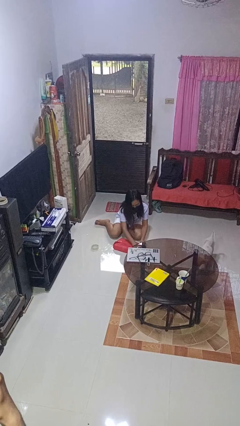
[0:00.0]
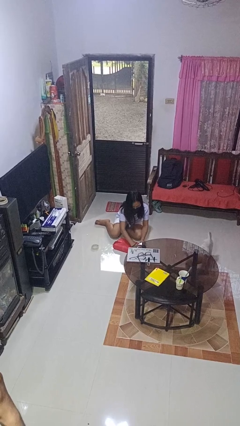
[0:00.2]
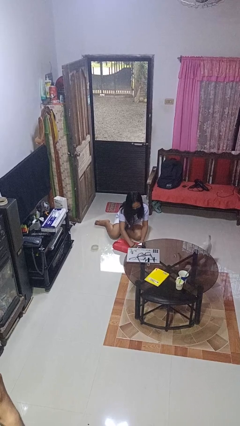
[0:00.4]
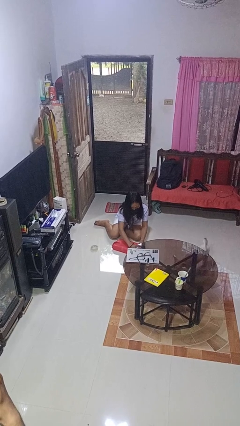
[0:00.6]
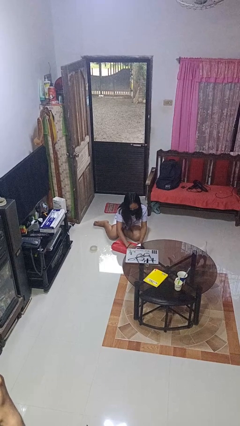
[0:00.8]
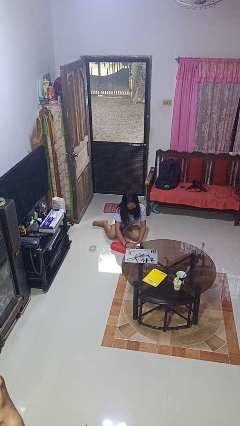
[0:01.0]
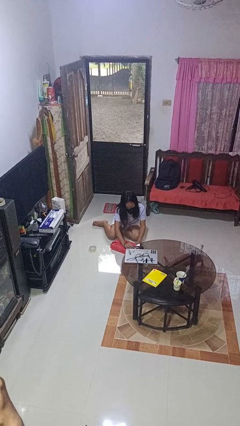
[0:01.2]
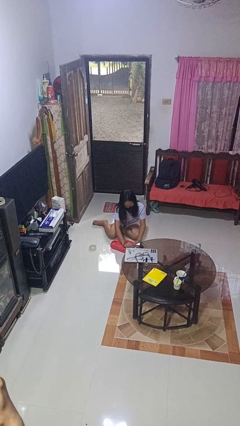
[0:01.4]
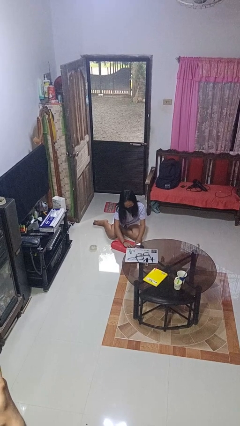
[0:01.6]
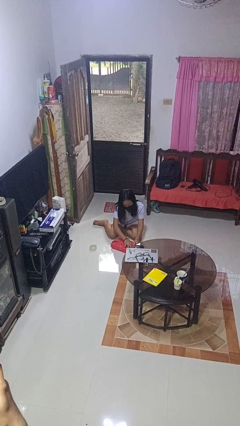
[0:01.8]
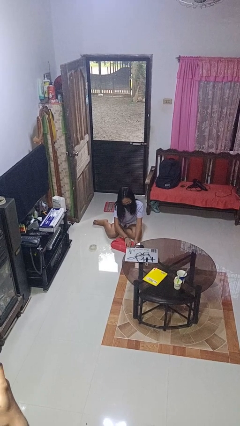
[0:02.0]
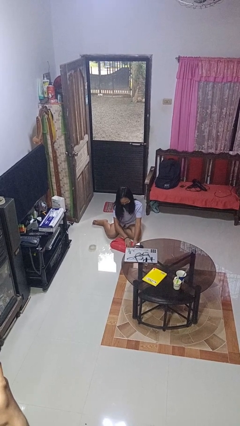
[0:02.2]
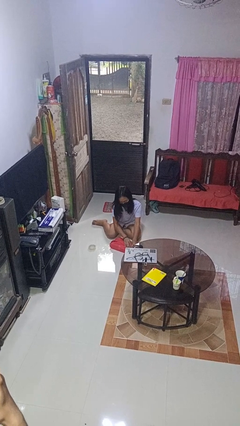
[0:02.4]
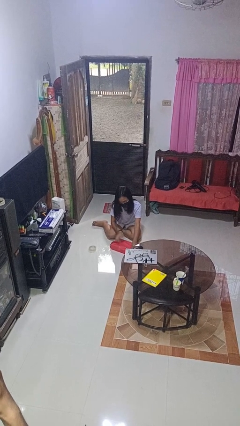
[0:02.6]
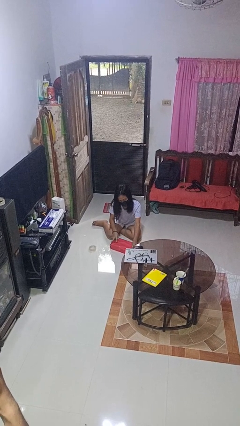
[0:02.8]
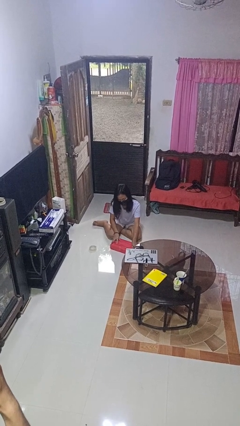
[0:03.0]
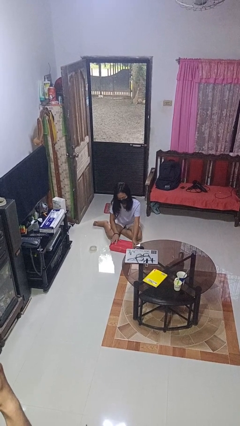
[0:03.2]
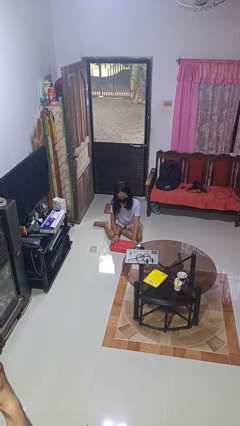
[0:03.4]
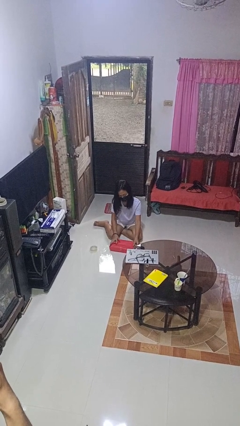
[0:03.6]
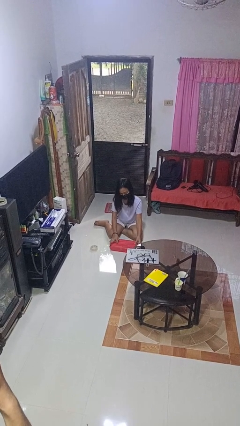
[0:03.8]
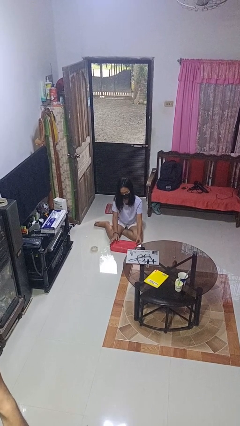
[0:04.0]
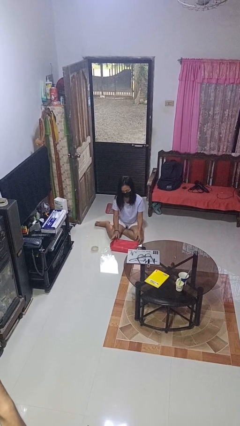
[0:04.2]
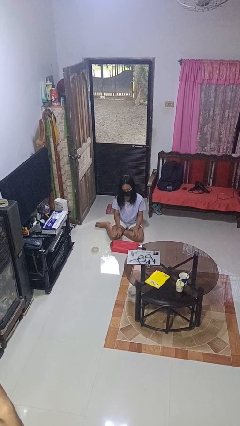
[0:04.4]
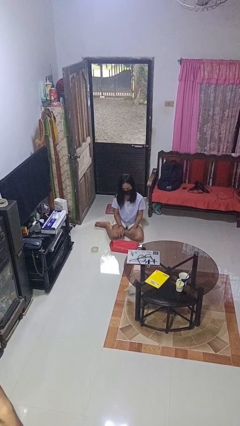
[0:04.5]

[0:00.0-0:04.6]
person wraps box

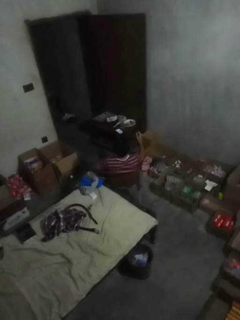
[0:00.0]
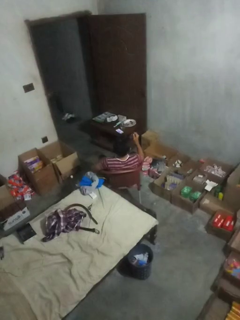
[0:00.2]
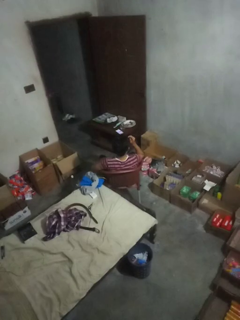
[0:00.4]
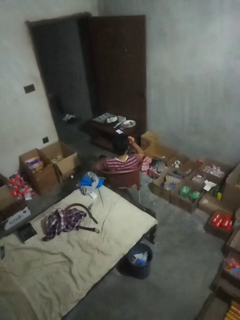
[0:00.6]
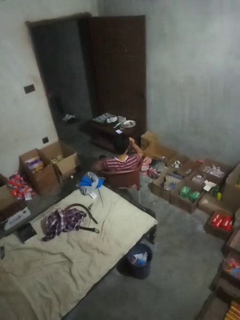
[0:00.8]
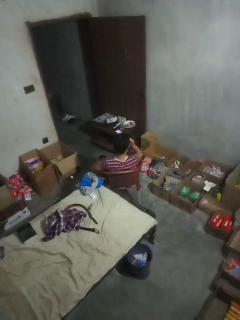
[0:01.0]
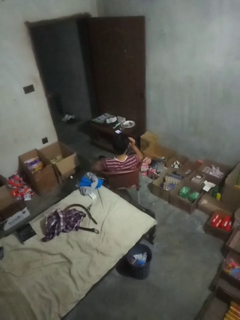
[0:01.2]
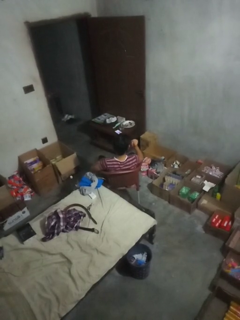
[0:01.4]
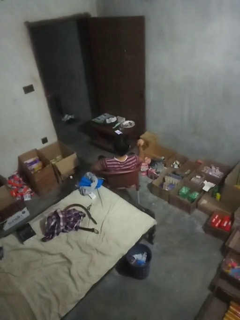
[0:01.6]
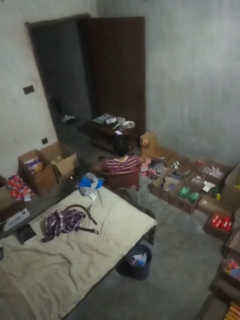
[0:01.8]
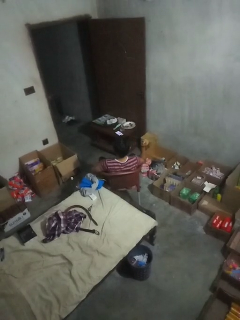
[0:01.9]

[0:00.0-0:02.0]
person puts on sunglasses

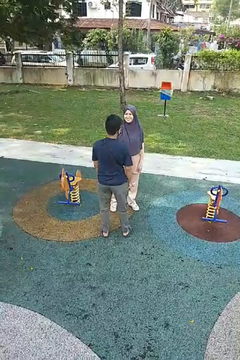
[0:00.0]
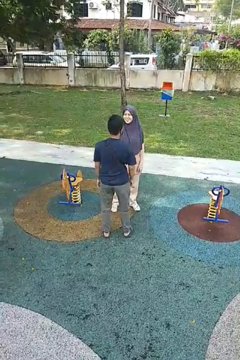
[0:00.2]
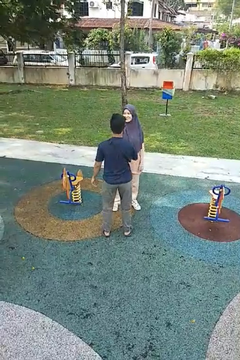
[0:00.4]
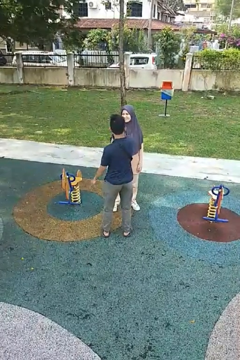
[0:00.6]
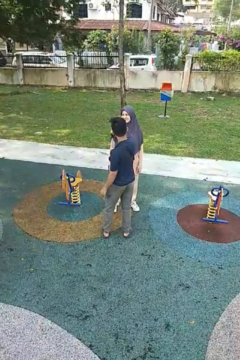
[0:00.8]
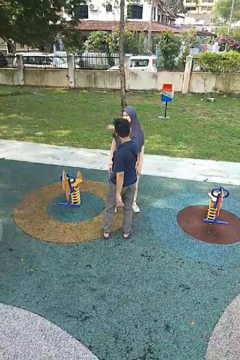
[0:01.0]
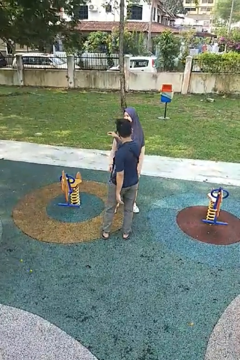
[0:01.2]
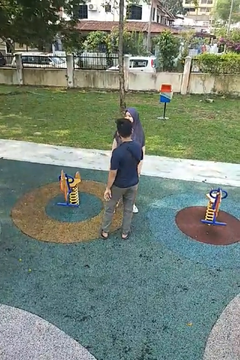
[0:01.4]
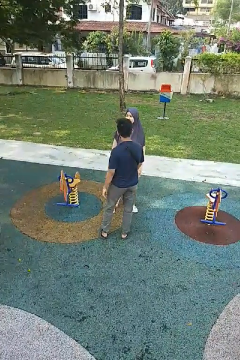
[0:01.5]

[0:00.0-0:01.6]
person shoves person

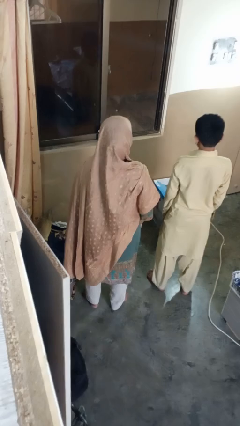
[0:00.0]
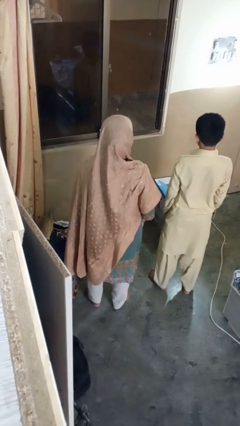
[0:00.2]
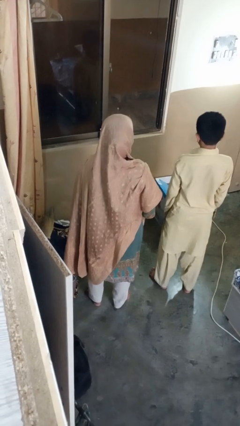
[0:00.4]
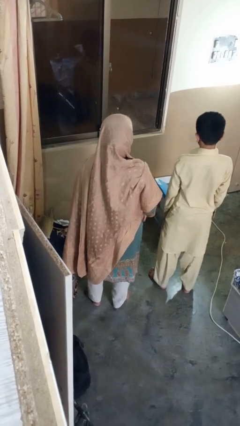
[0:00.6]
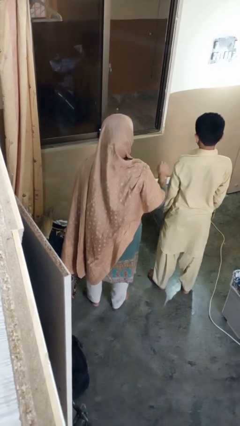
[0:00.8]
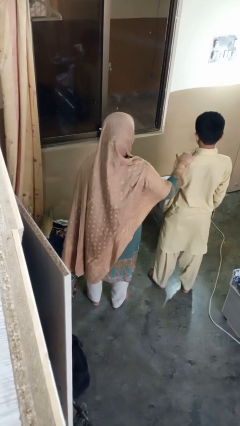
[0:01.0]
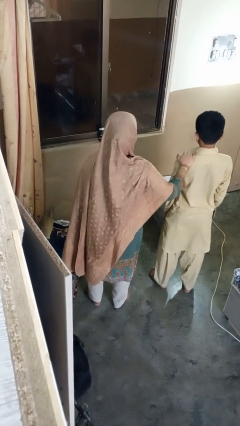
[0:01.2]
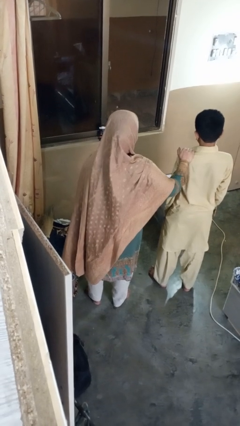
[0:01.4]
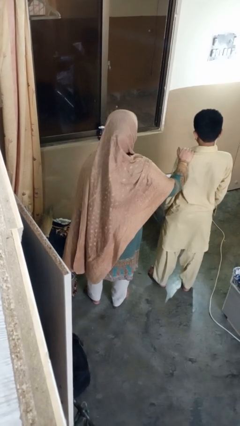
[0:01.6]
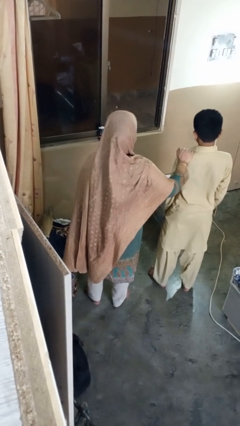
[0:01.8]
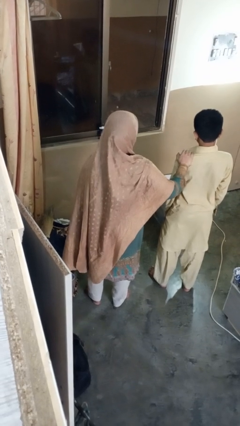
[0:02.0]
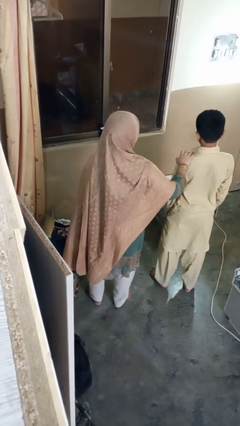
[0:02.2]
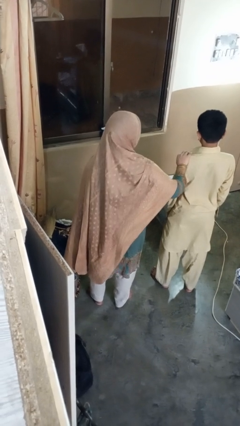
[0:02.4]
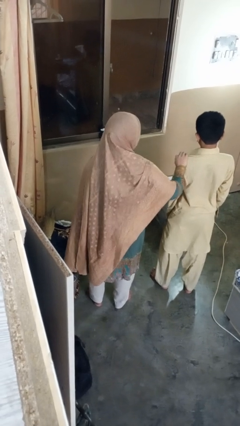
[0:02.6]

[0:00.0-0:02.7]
person grabs person by bicep

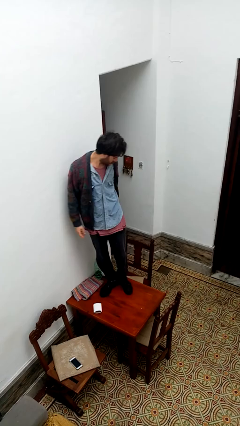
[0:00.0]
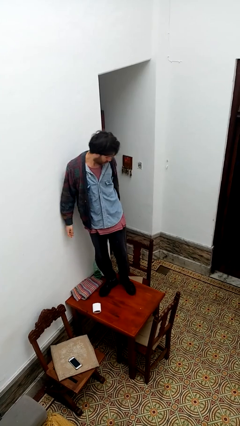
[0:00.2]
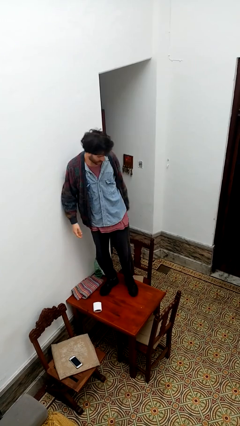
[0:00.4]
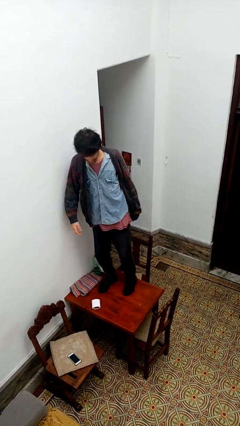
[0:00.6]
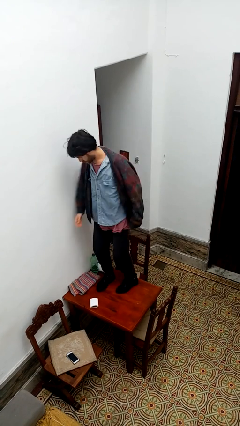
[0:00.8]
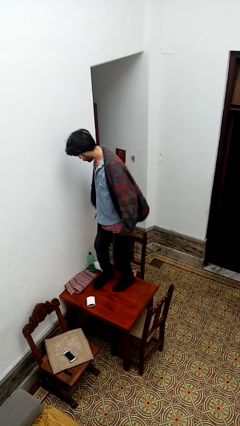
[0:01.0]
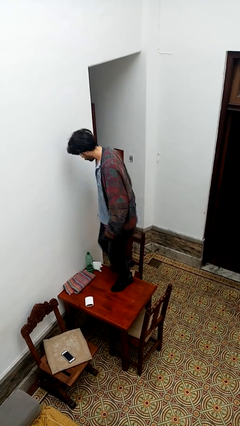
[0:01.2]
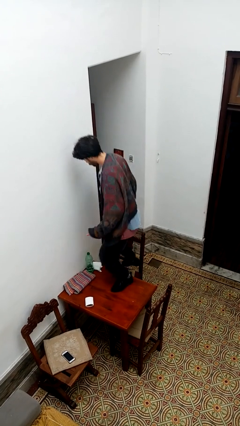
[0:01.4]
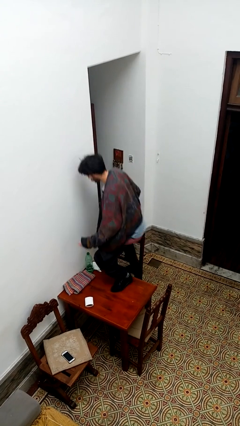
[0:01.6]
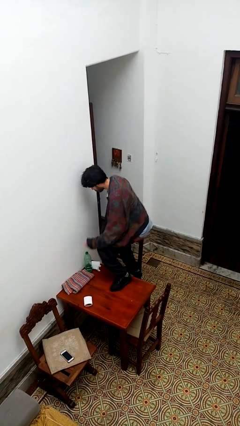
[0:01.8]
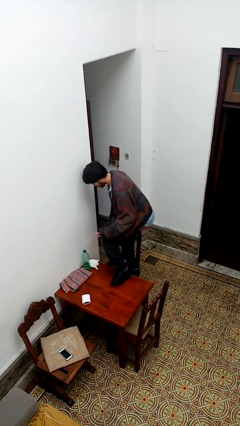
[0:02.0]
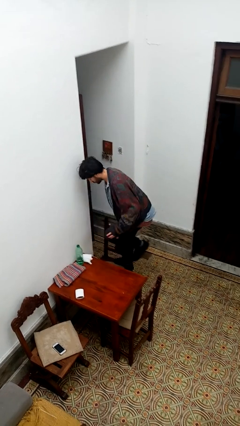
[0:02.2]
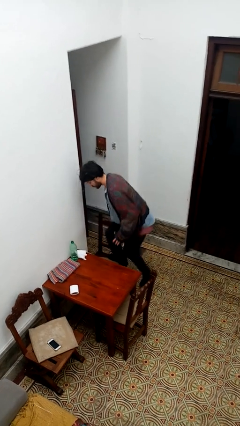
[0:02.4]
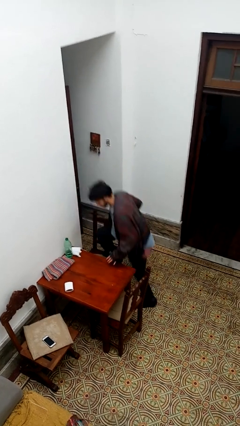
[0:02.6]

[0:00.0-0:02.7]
person climbs off table

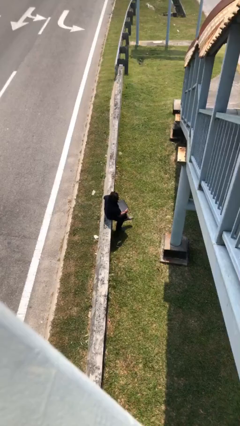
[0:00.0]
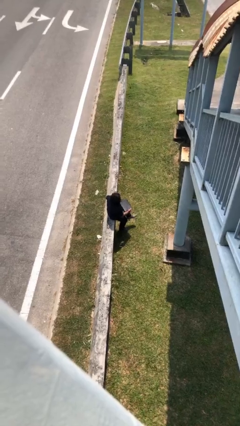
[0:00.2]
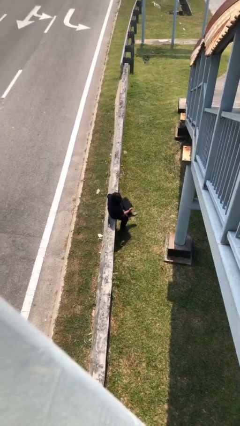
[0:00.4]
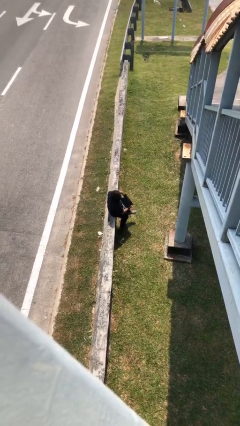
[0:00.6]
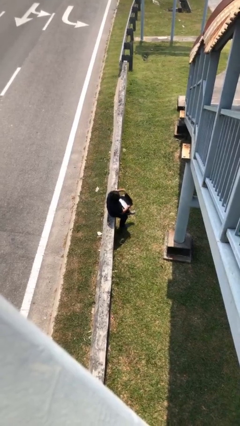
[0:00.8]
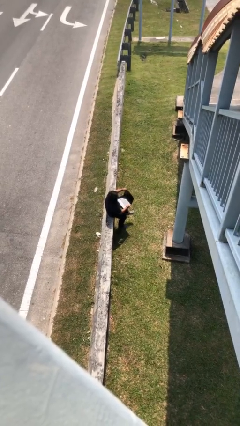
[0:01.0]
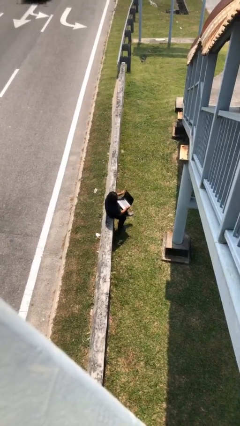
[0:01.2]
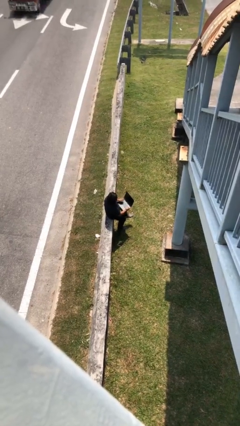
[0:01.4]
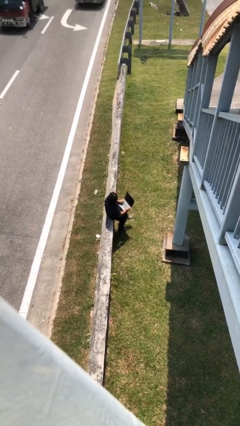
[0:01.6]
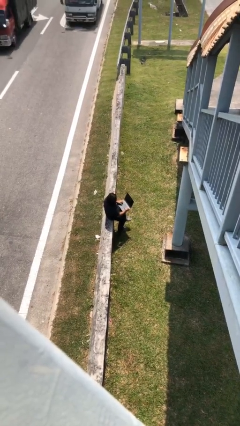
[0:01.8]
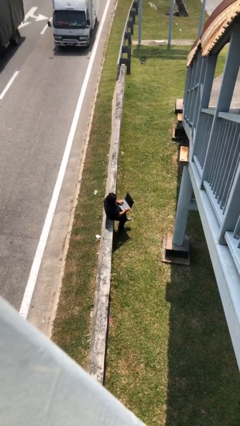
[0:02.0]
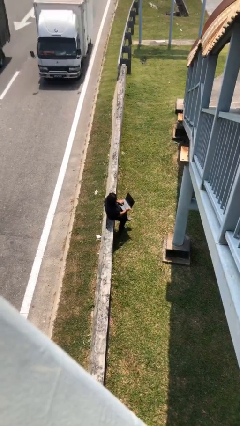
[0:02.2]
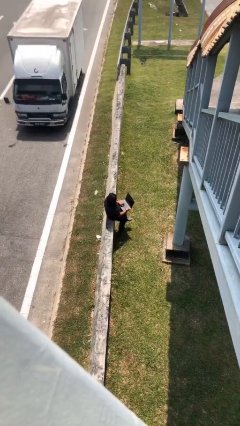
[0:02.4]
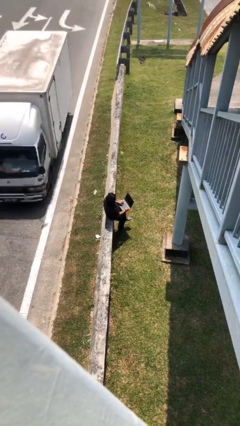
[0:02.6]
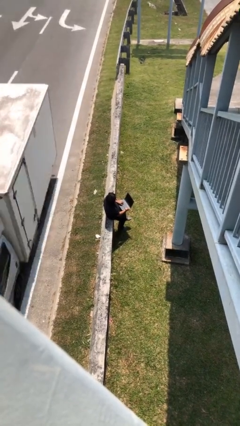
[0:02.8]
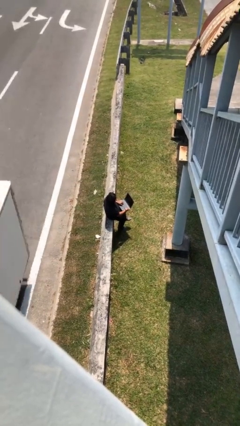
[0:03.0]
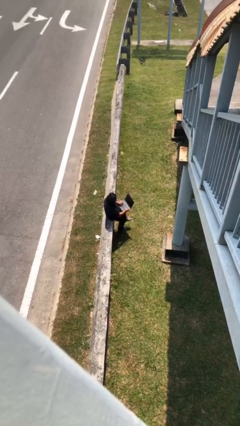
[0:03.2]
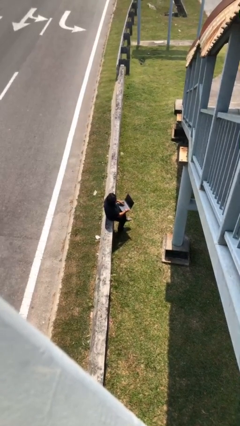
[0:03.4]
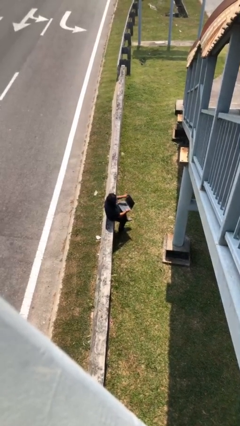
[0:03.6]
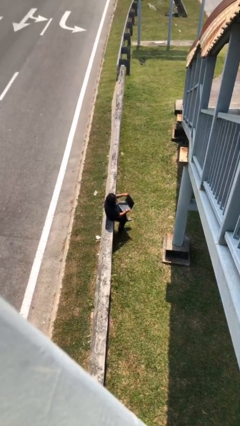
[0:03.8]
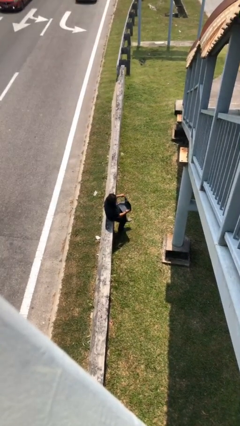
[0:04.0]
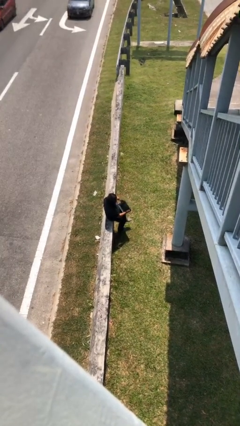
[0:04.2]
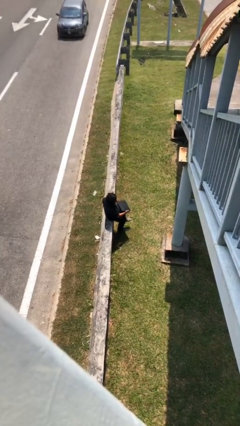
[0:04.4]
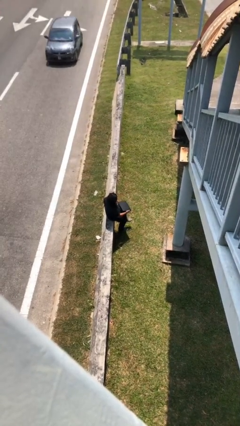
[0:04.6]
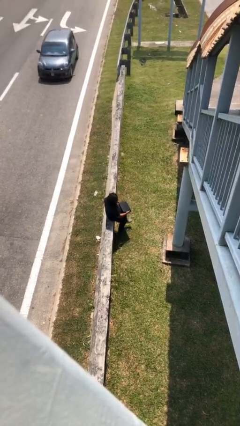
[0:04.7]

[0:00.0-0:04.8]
person interacts with laptop

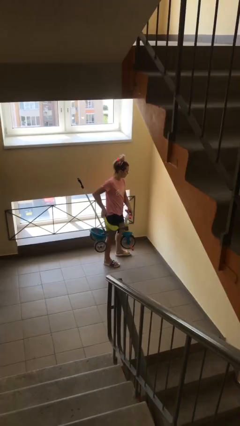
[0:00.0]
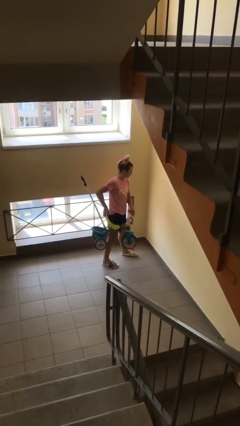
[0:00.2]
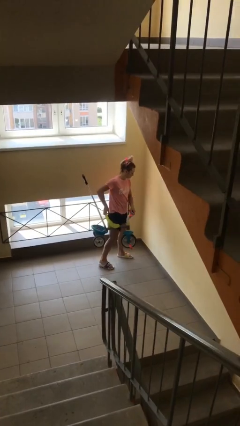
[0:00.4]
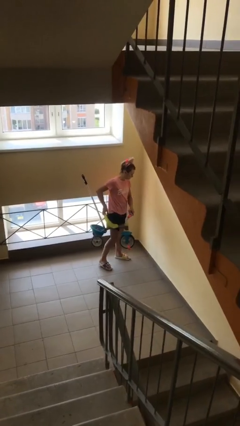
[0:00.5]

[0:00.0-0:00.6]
person carries bicycle
